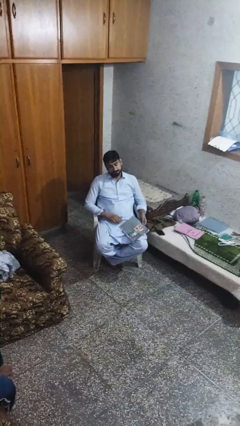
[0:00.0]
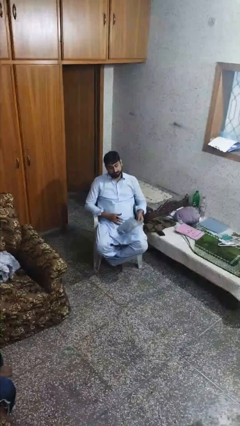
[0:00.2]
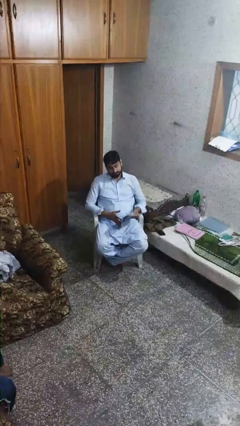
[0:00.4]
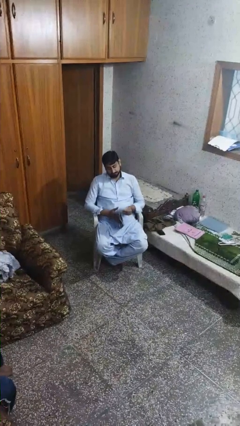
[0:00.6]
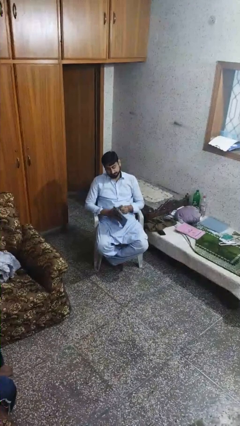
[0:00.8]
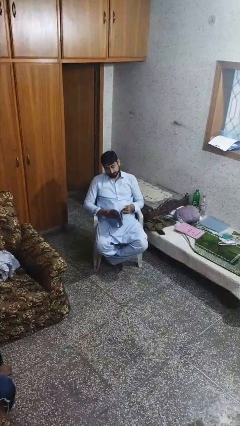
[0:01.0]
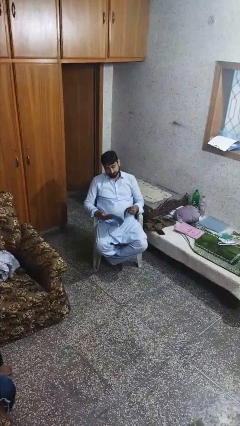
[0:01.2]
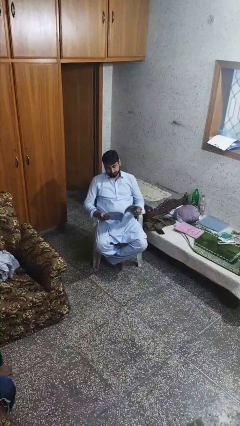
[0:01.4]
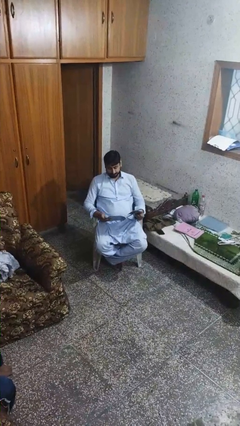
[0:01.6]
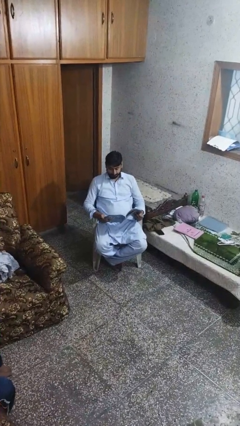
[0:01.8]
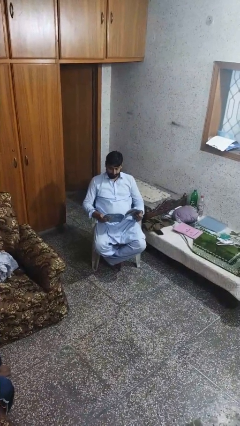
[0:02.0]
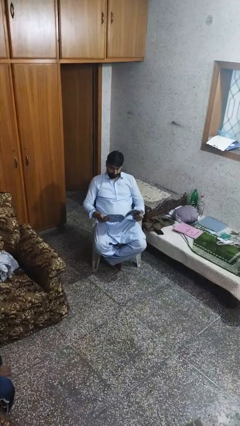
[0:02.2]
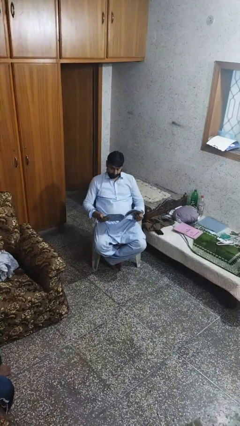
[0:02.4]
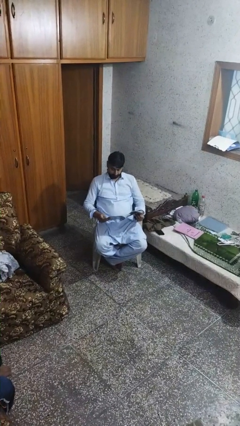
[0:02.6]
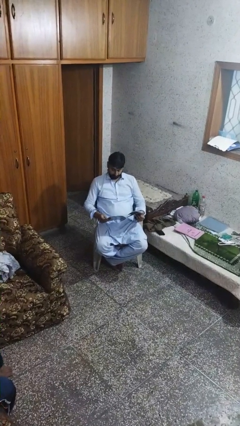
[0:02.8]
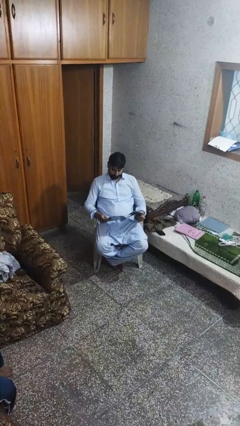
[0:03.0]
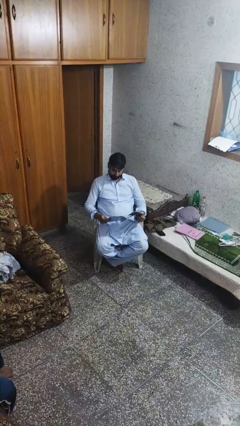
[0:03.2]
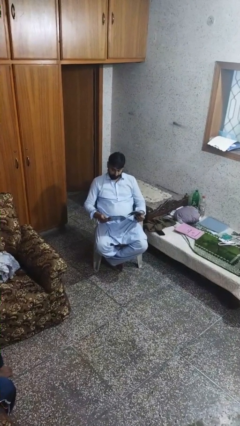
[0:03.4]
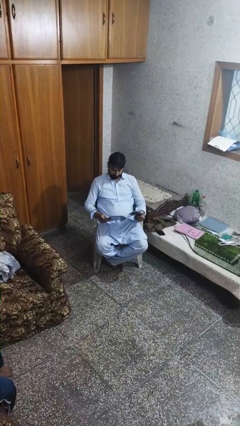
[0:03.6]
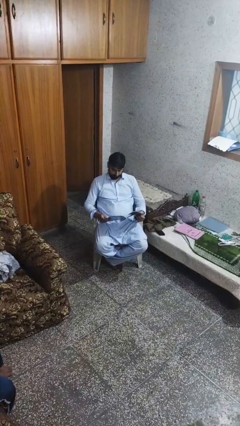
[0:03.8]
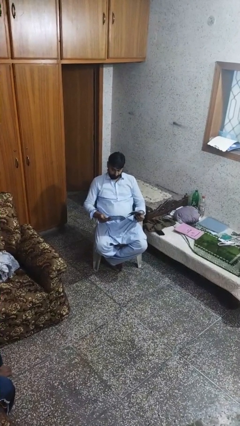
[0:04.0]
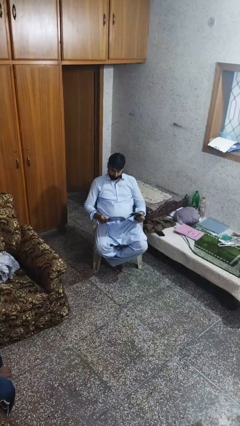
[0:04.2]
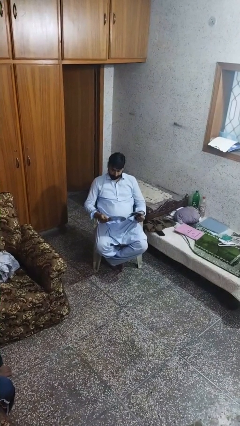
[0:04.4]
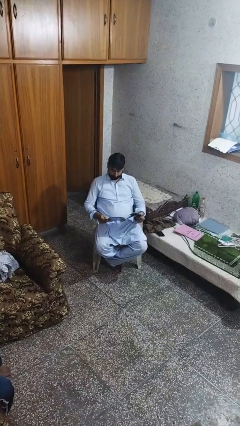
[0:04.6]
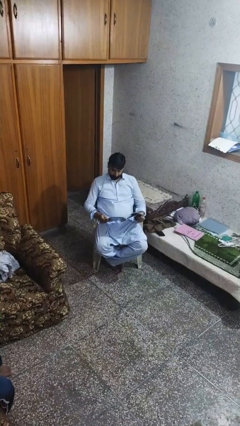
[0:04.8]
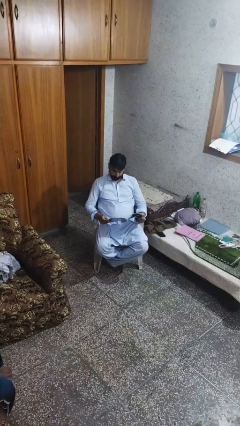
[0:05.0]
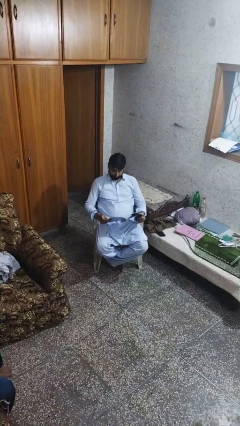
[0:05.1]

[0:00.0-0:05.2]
person reads book

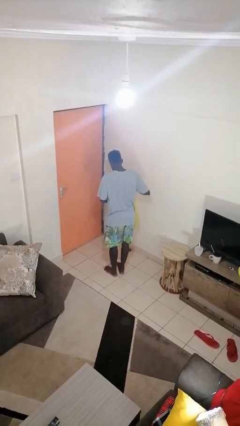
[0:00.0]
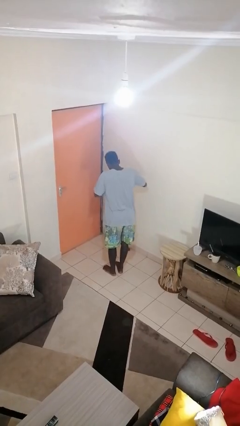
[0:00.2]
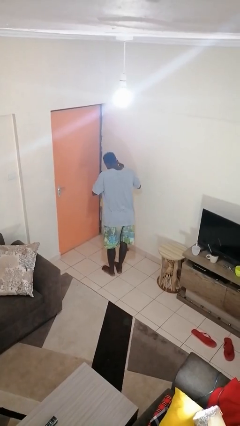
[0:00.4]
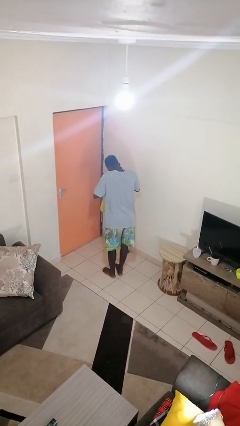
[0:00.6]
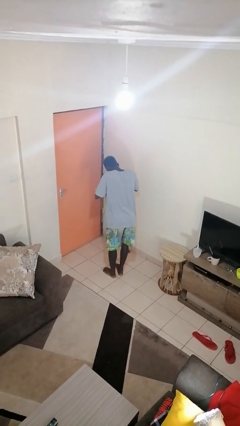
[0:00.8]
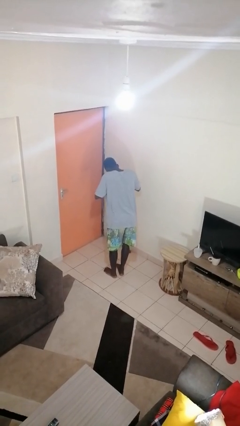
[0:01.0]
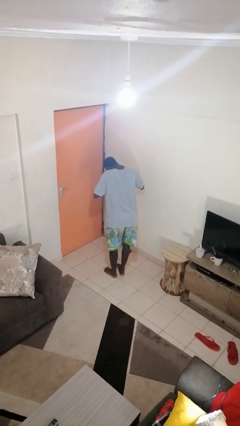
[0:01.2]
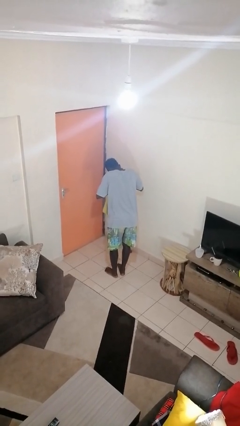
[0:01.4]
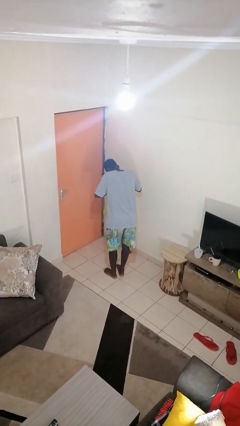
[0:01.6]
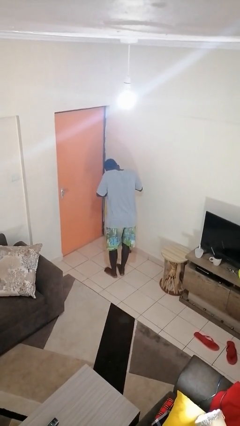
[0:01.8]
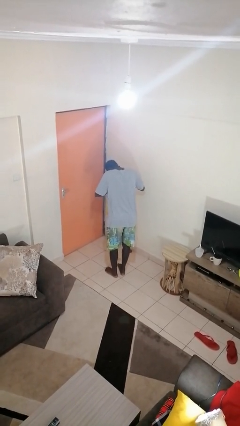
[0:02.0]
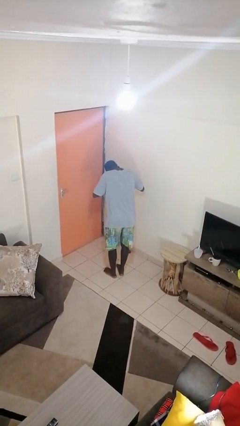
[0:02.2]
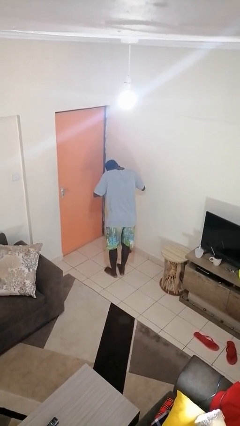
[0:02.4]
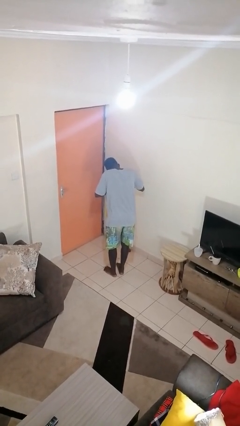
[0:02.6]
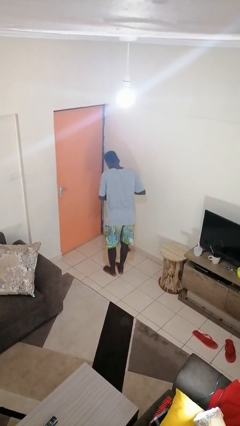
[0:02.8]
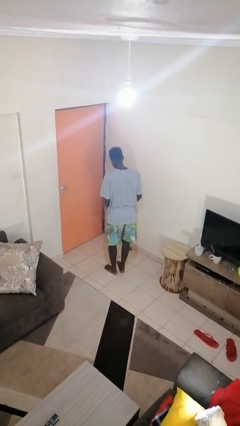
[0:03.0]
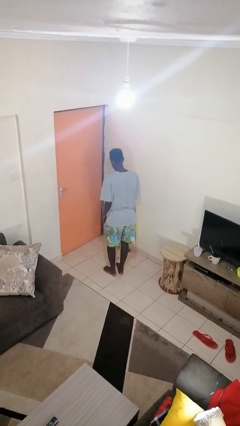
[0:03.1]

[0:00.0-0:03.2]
person searches in bag

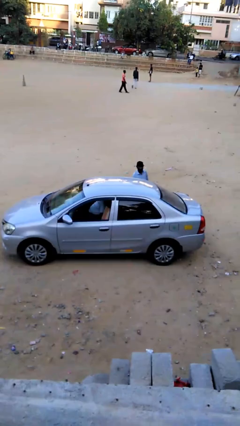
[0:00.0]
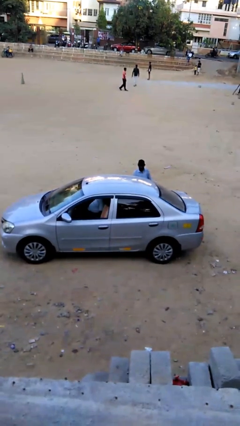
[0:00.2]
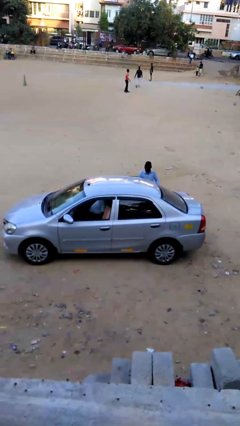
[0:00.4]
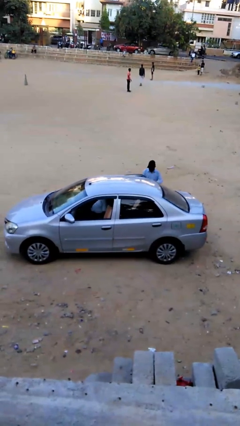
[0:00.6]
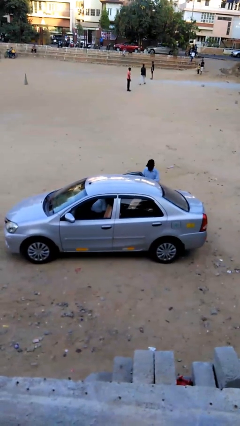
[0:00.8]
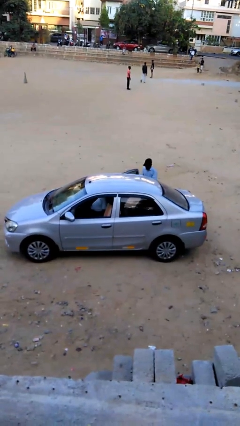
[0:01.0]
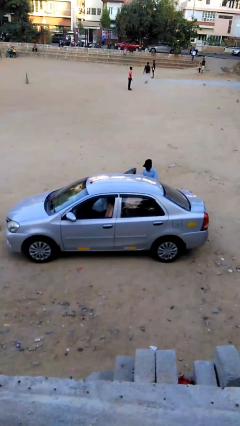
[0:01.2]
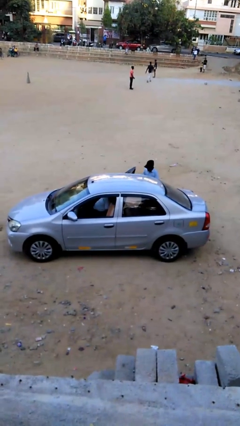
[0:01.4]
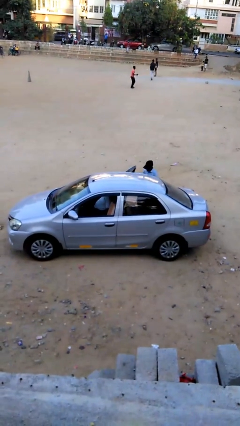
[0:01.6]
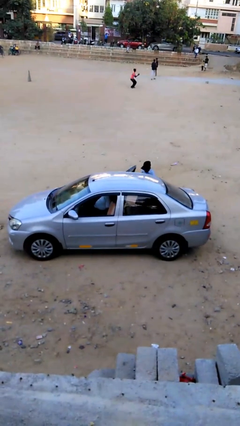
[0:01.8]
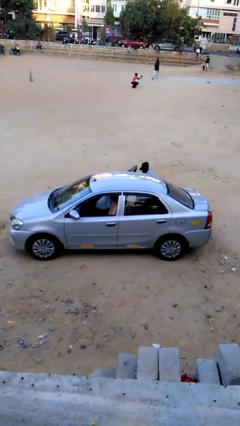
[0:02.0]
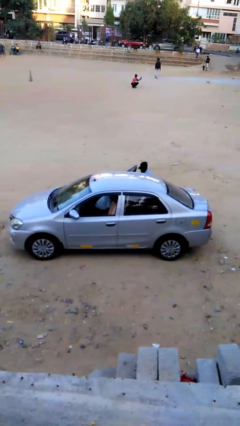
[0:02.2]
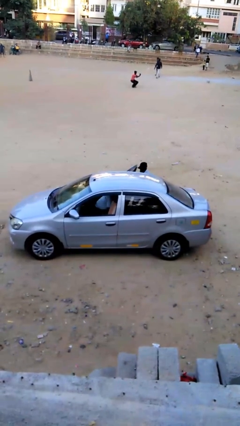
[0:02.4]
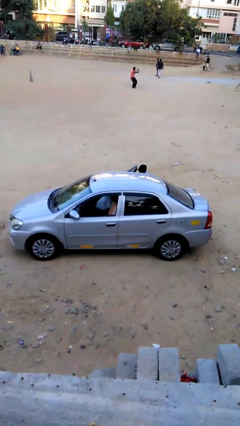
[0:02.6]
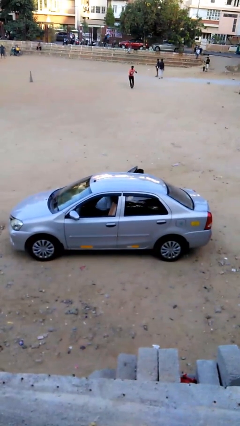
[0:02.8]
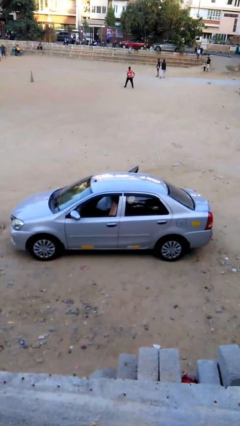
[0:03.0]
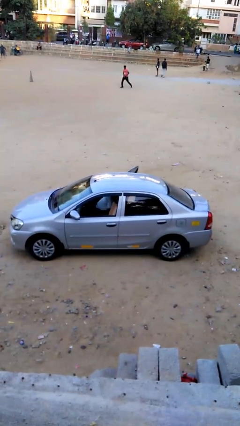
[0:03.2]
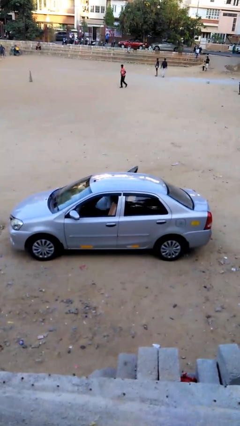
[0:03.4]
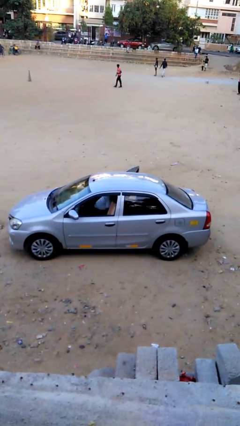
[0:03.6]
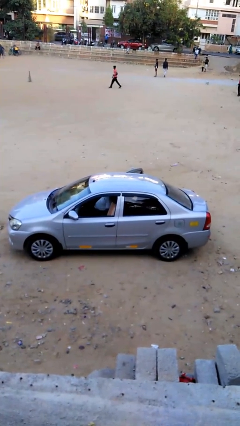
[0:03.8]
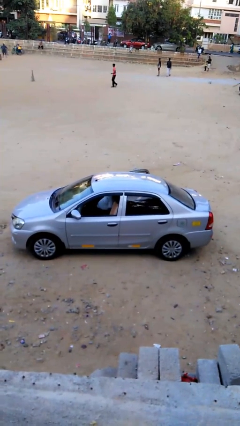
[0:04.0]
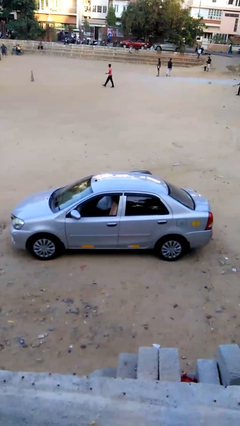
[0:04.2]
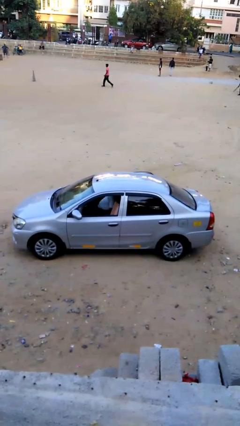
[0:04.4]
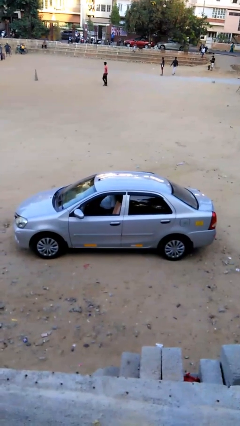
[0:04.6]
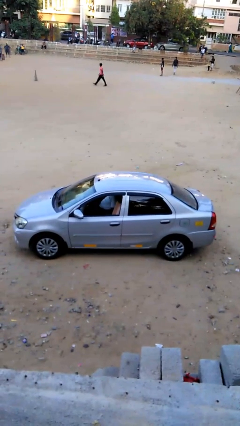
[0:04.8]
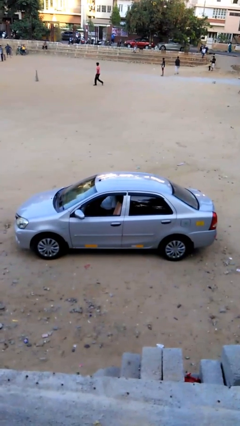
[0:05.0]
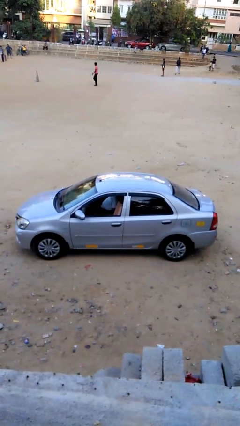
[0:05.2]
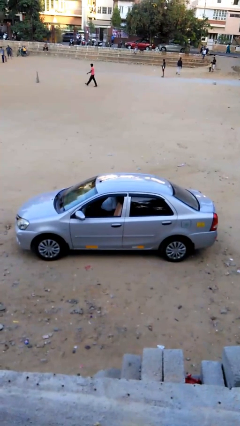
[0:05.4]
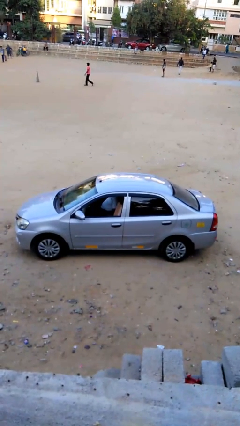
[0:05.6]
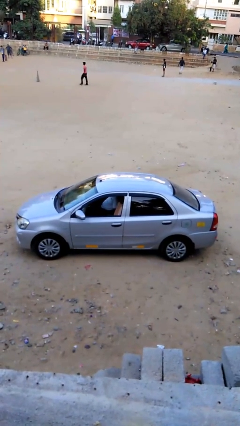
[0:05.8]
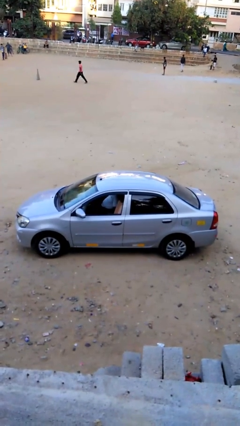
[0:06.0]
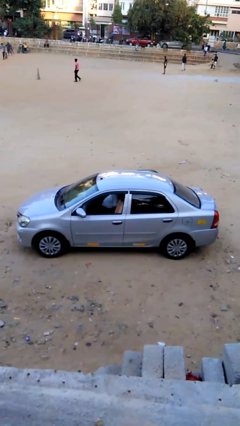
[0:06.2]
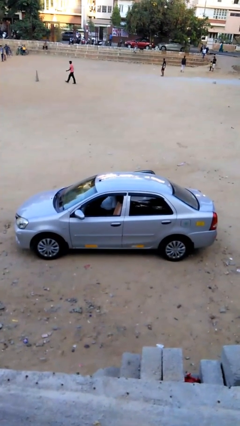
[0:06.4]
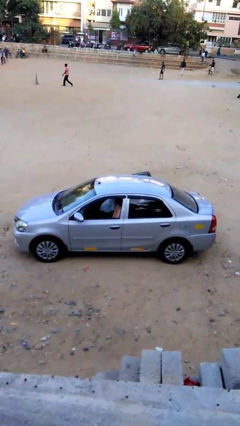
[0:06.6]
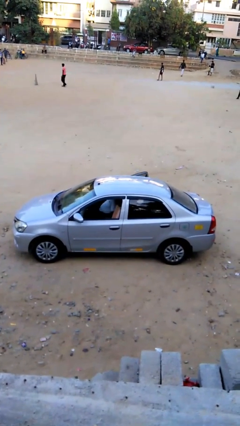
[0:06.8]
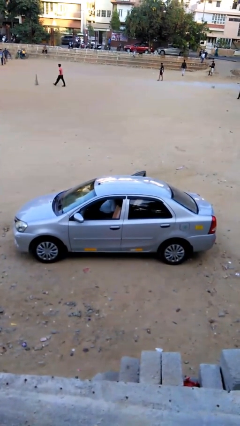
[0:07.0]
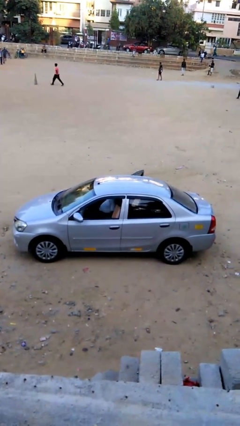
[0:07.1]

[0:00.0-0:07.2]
car picks up person

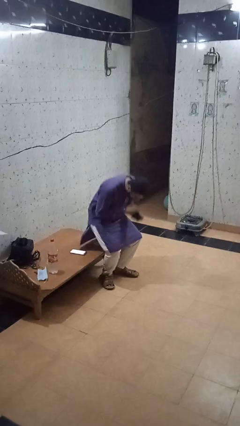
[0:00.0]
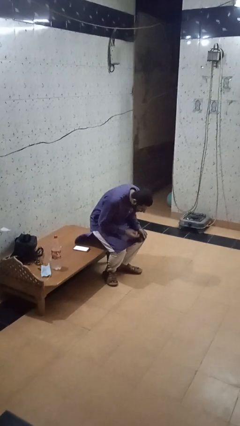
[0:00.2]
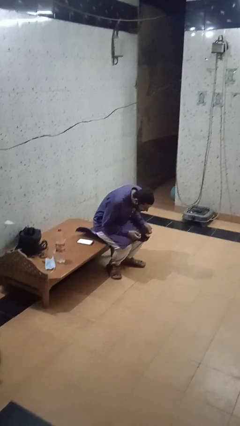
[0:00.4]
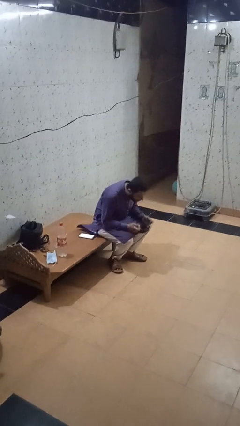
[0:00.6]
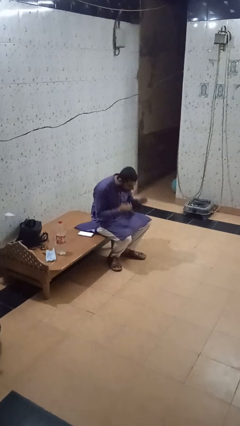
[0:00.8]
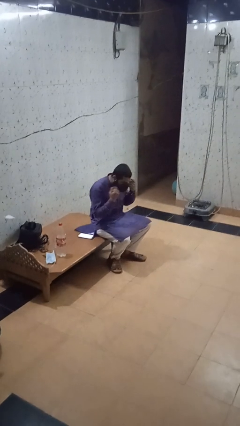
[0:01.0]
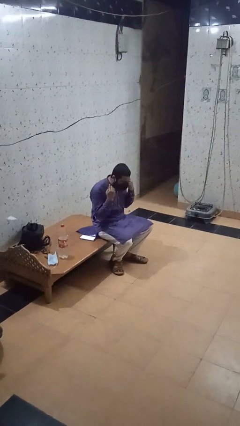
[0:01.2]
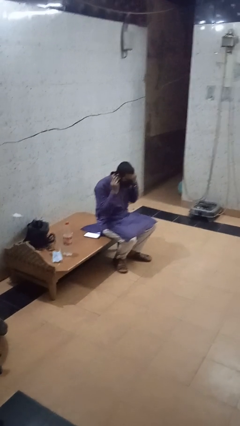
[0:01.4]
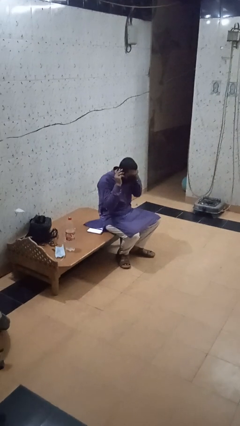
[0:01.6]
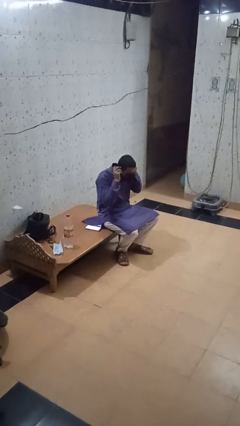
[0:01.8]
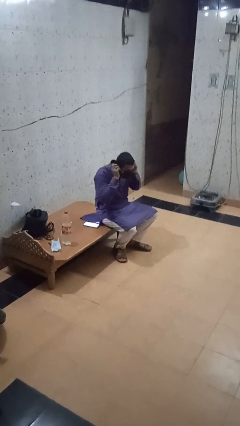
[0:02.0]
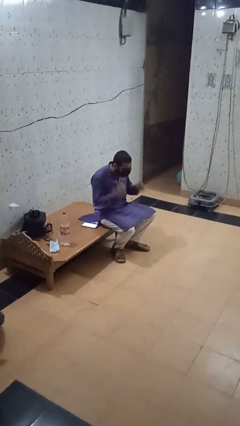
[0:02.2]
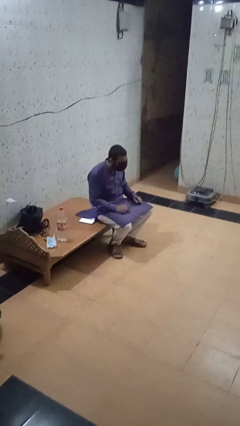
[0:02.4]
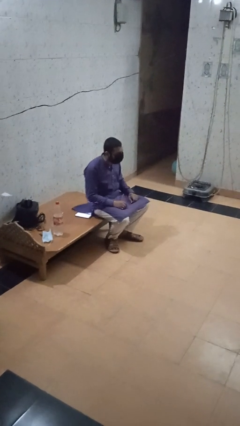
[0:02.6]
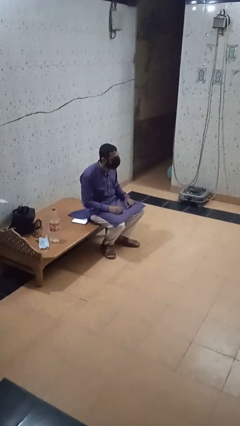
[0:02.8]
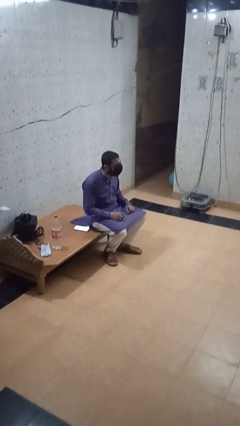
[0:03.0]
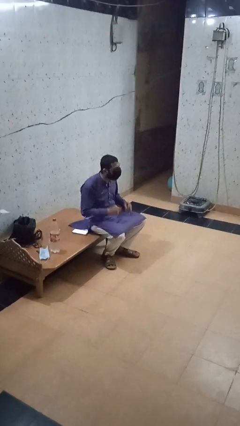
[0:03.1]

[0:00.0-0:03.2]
person puts on facemask
